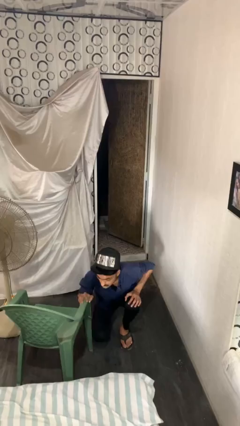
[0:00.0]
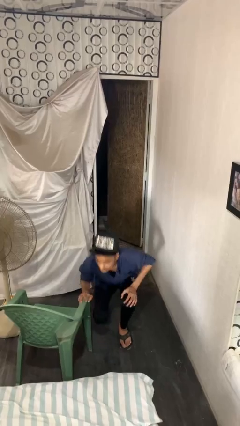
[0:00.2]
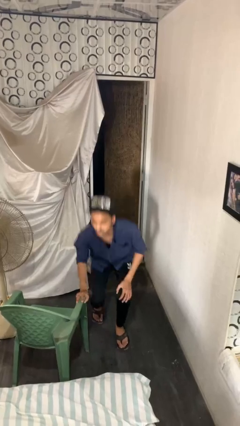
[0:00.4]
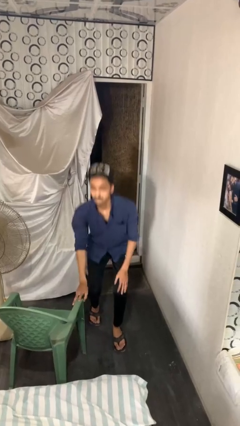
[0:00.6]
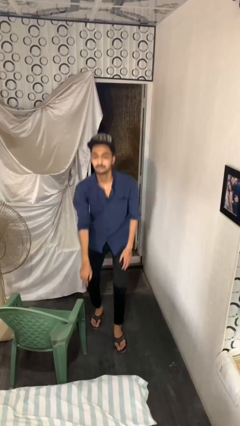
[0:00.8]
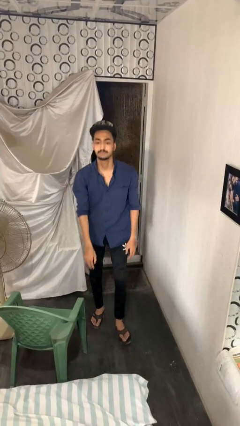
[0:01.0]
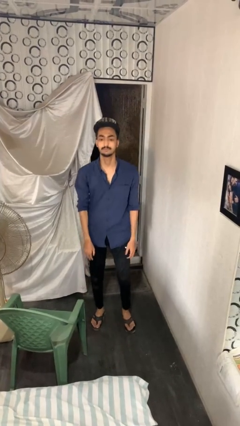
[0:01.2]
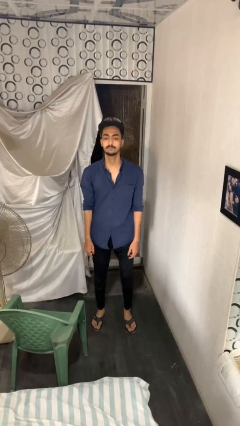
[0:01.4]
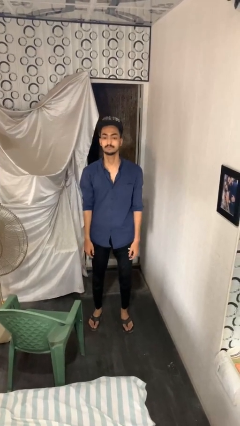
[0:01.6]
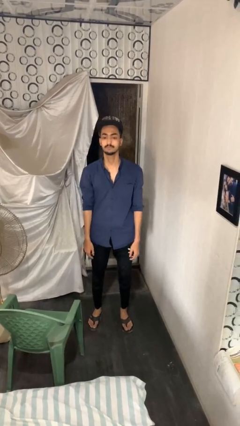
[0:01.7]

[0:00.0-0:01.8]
person stands up from floor

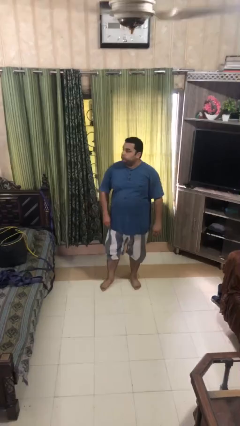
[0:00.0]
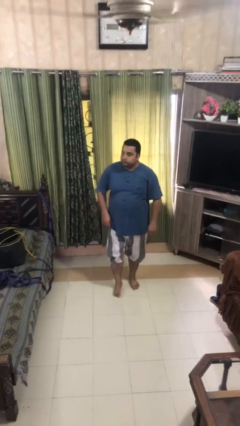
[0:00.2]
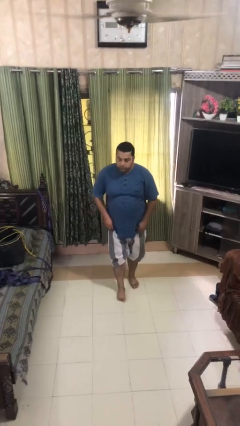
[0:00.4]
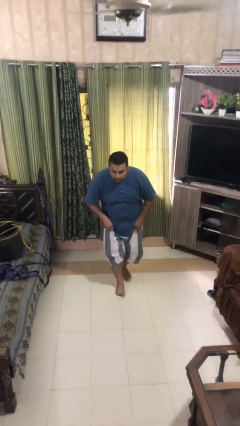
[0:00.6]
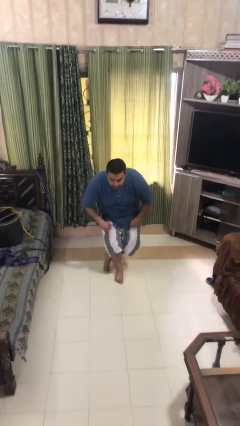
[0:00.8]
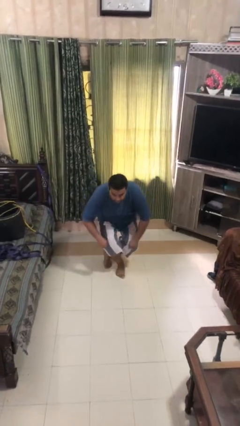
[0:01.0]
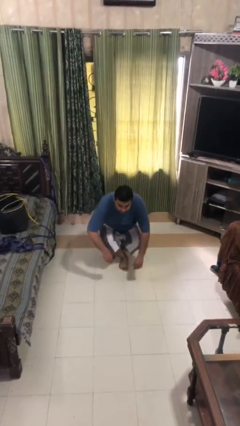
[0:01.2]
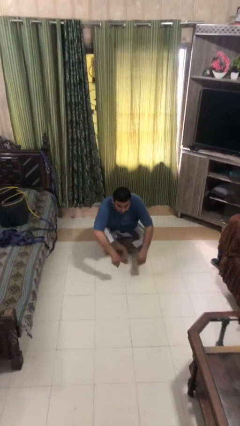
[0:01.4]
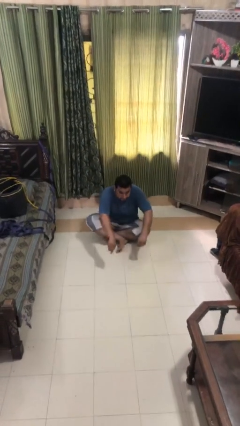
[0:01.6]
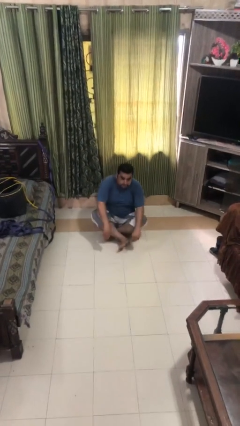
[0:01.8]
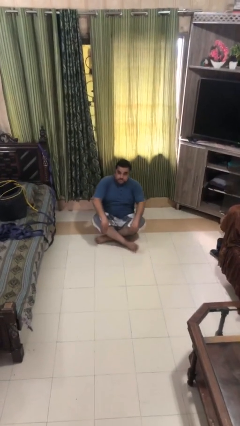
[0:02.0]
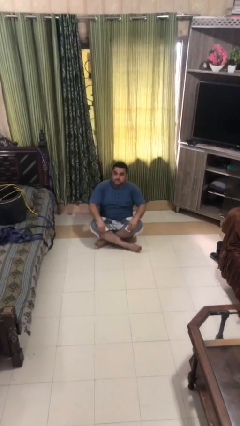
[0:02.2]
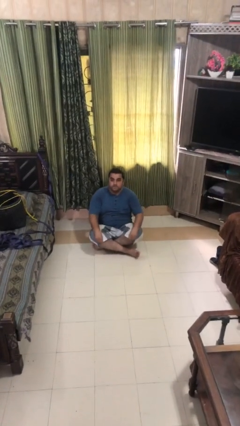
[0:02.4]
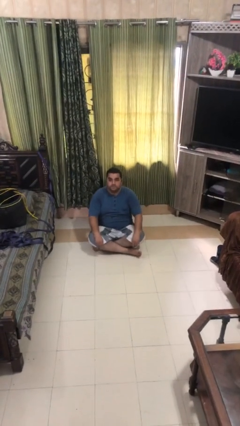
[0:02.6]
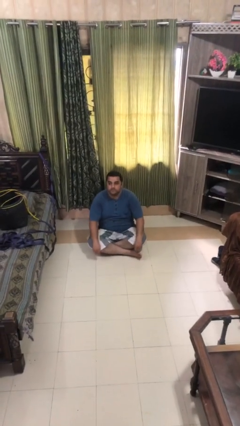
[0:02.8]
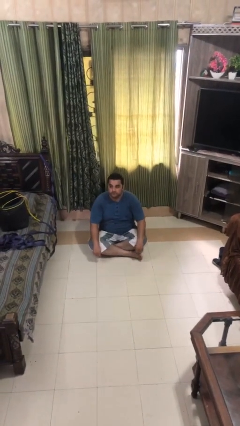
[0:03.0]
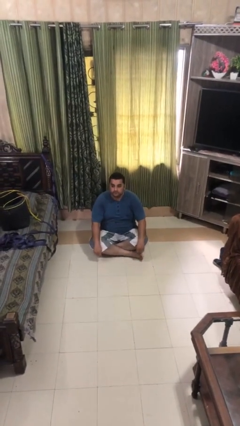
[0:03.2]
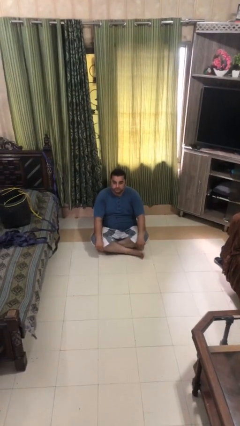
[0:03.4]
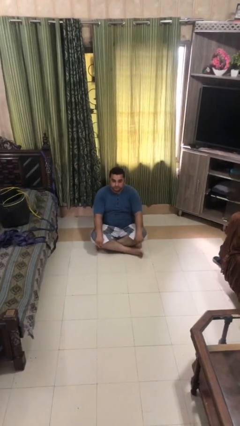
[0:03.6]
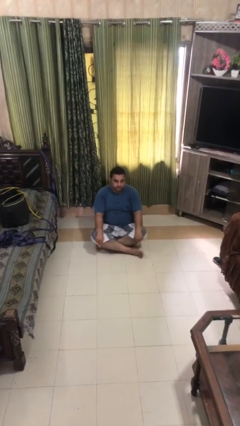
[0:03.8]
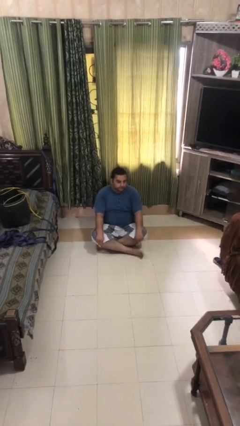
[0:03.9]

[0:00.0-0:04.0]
person sits crisscross

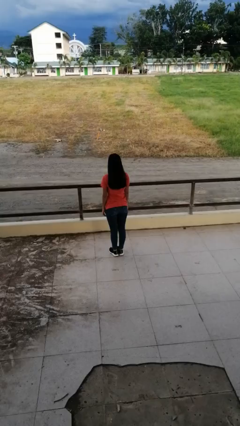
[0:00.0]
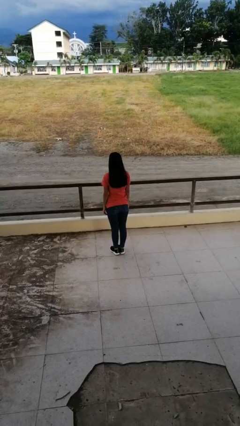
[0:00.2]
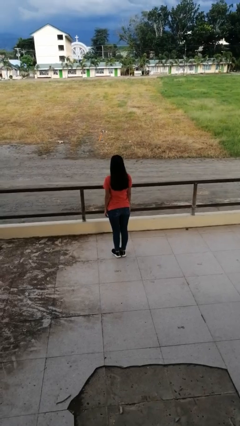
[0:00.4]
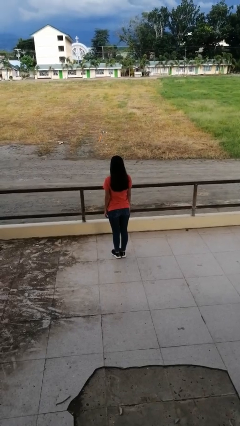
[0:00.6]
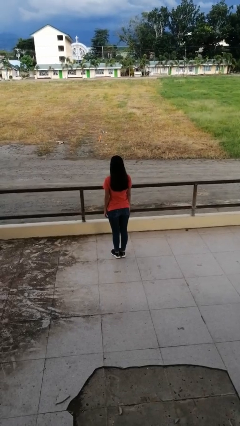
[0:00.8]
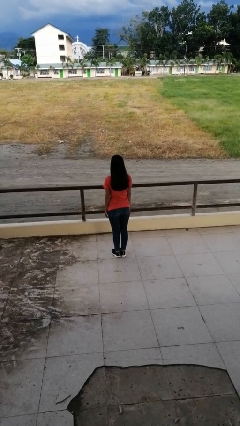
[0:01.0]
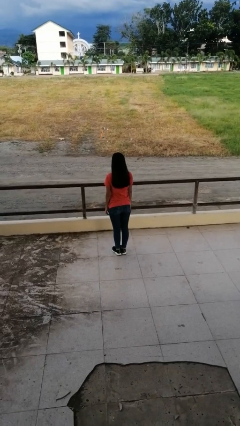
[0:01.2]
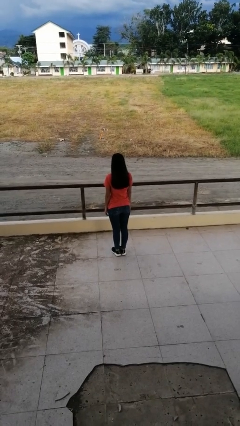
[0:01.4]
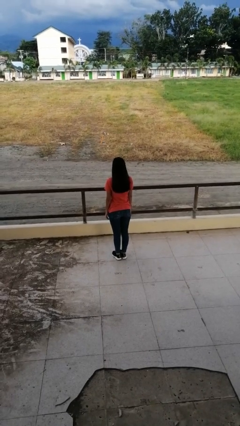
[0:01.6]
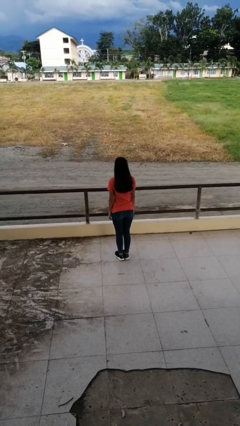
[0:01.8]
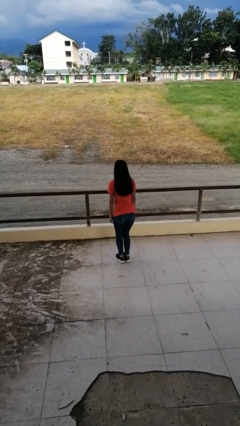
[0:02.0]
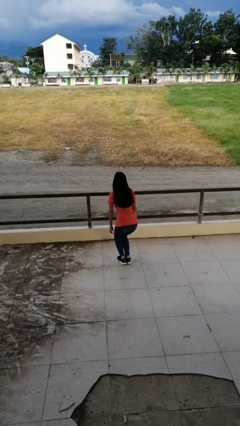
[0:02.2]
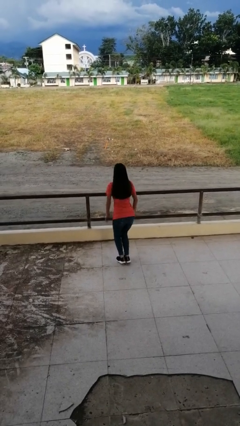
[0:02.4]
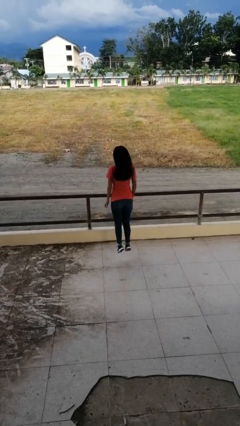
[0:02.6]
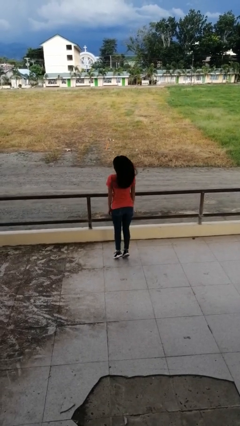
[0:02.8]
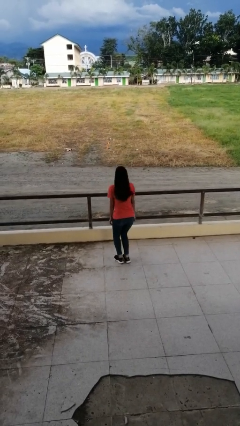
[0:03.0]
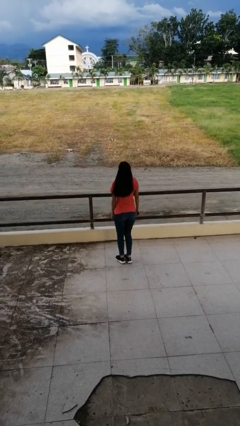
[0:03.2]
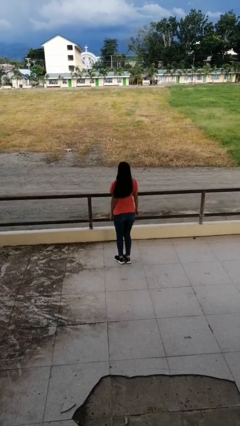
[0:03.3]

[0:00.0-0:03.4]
person jumps

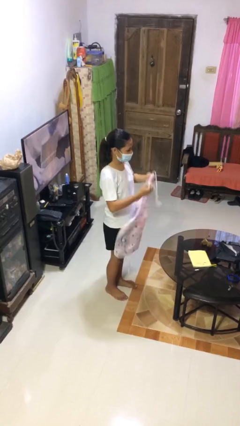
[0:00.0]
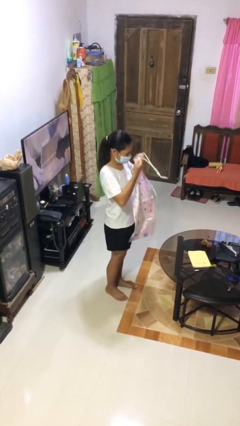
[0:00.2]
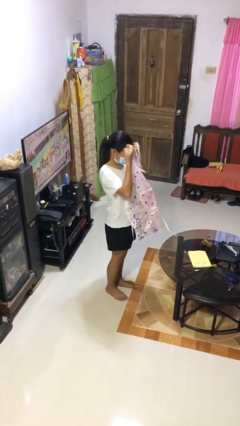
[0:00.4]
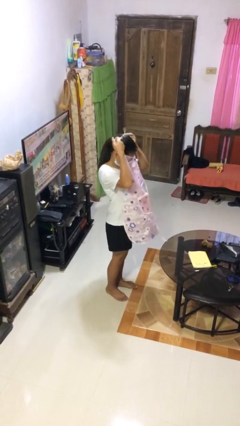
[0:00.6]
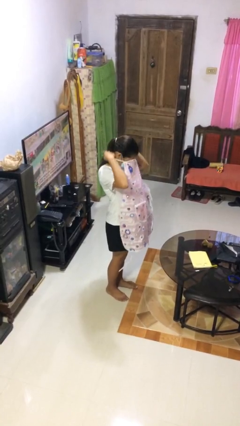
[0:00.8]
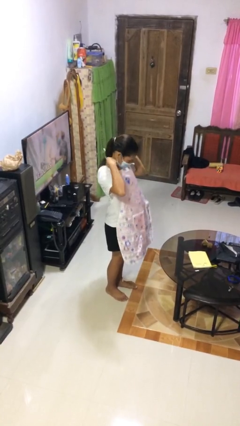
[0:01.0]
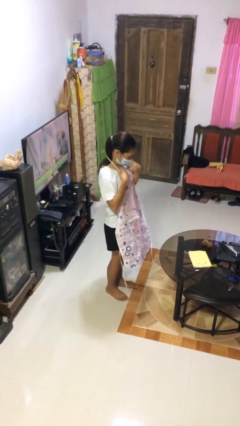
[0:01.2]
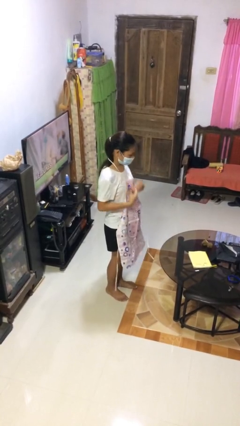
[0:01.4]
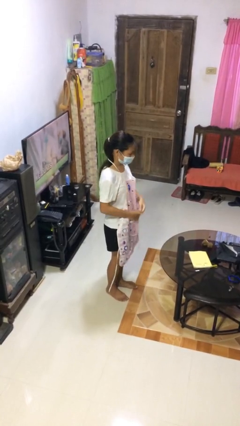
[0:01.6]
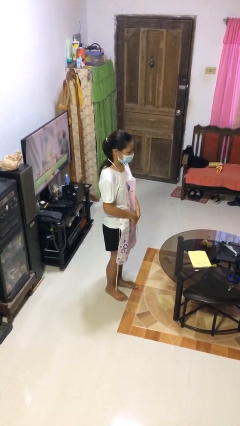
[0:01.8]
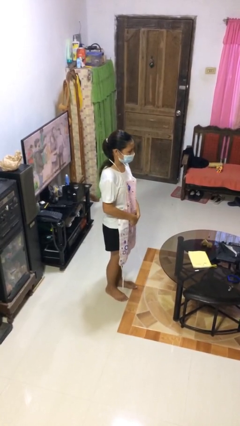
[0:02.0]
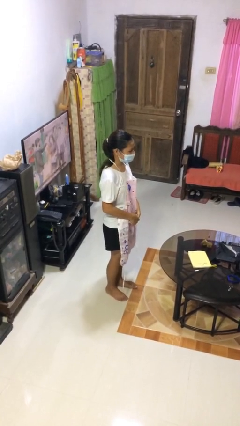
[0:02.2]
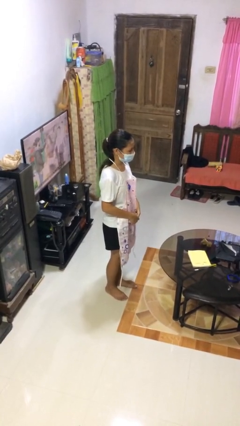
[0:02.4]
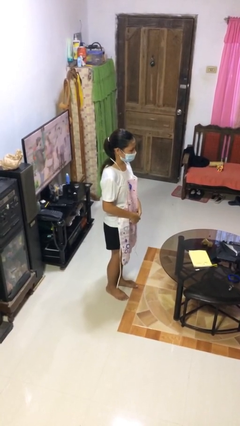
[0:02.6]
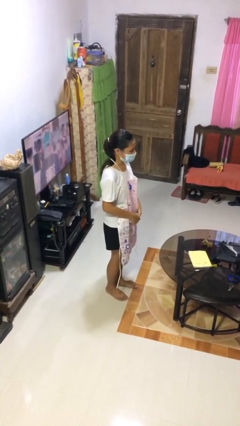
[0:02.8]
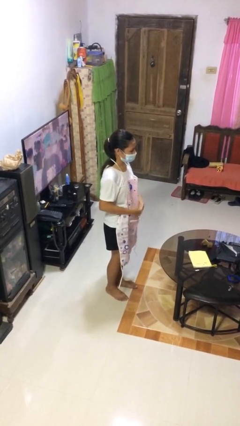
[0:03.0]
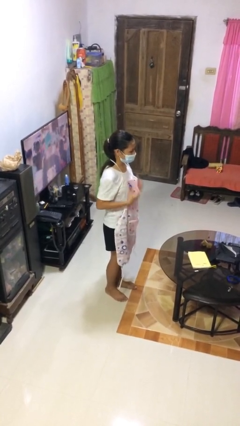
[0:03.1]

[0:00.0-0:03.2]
person puts on apron

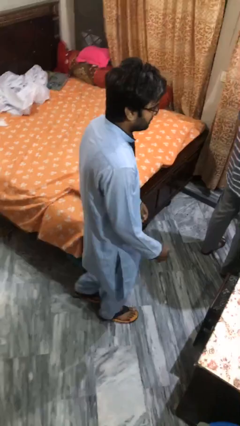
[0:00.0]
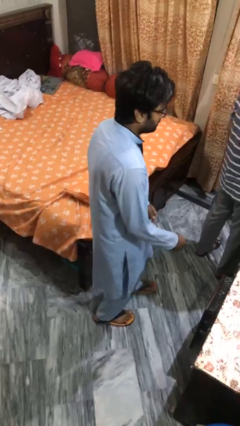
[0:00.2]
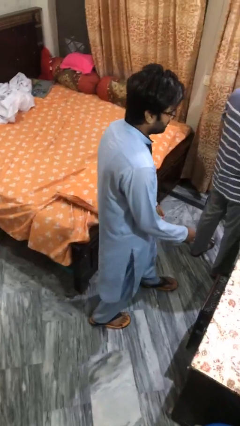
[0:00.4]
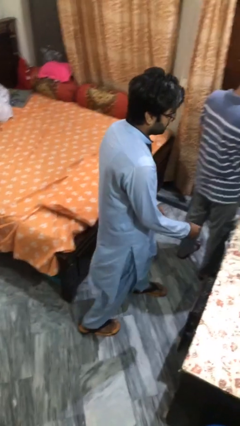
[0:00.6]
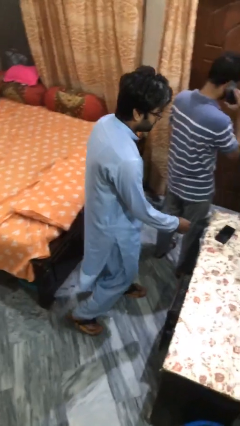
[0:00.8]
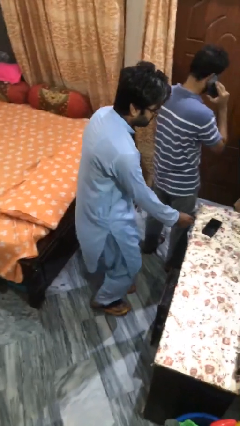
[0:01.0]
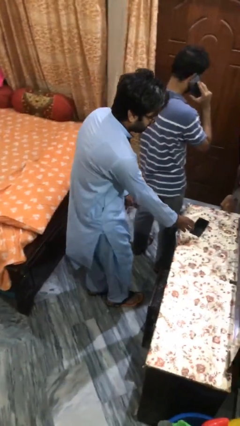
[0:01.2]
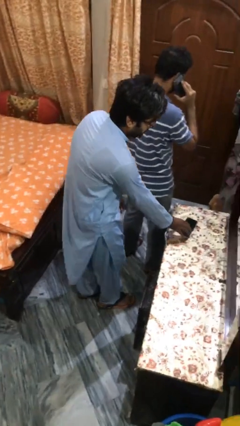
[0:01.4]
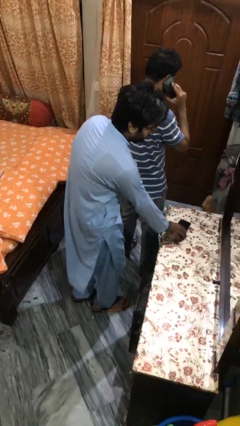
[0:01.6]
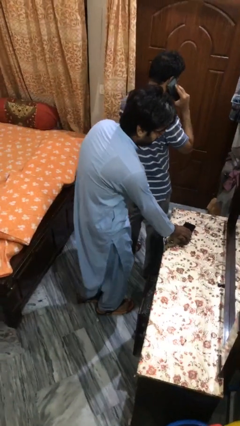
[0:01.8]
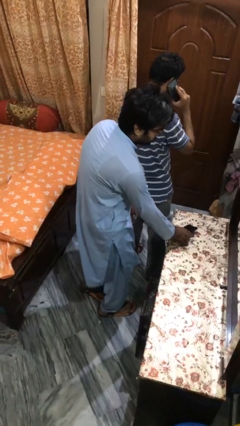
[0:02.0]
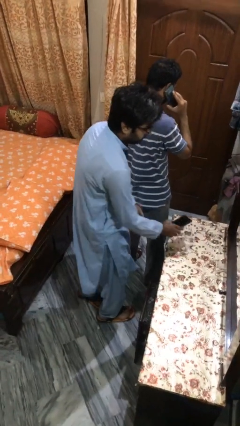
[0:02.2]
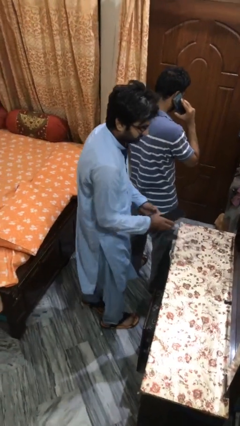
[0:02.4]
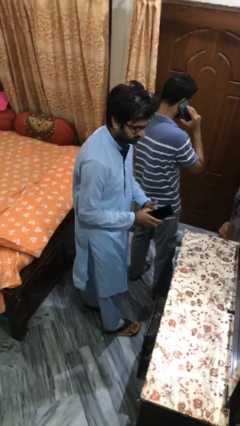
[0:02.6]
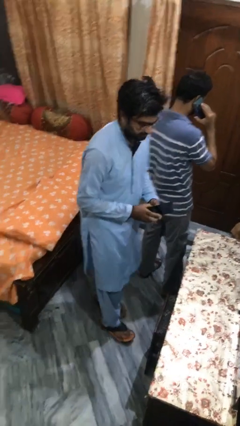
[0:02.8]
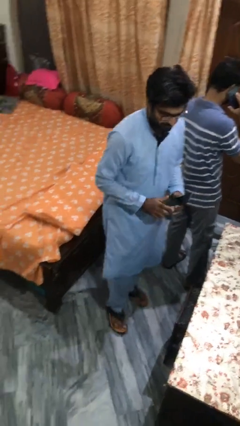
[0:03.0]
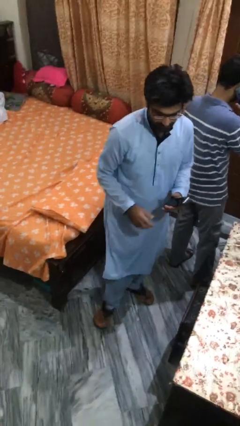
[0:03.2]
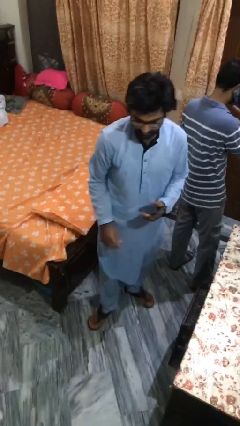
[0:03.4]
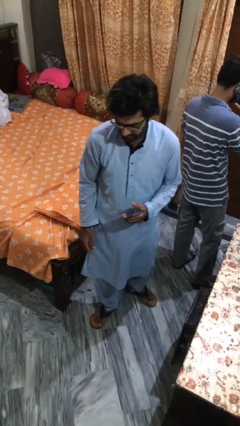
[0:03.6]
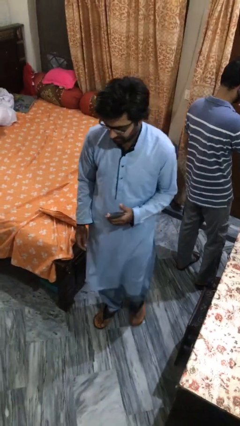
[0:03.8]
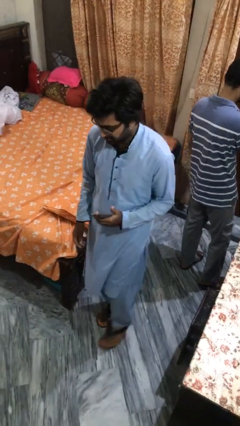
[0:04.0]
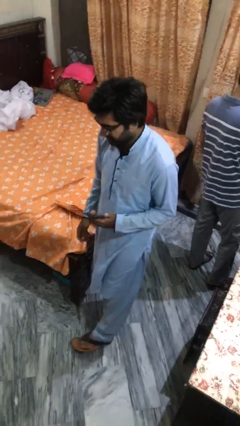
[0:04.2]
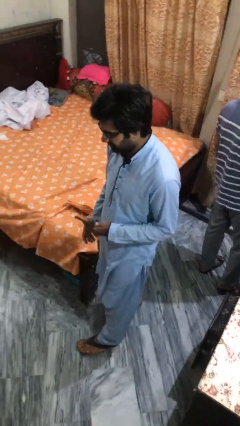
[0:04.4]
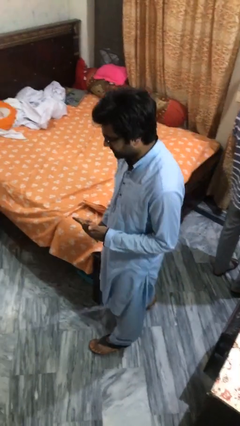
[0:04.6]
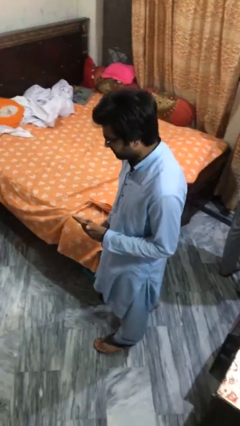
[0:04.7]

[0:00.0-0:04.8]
person steals object from person

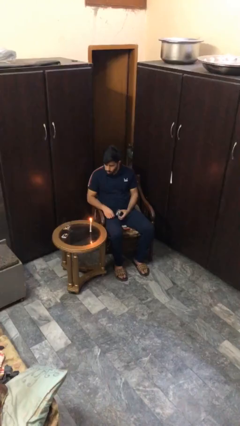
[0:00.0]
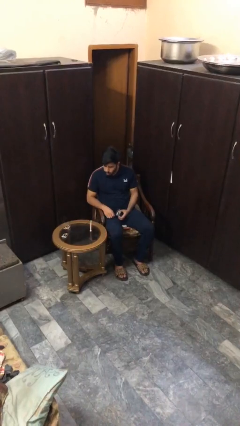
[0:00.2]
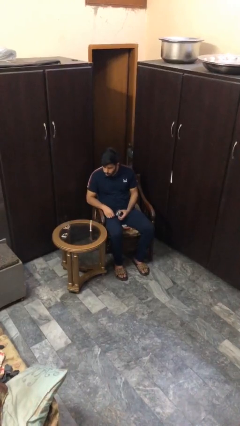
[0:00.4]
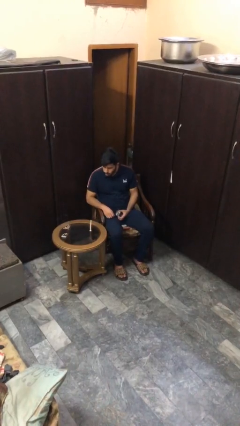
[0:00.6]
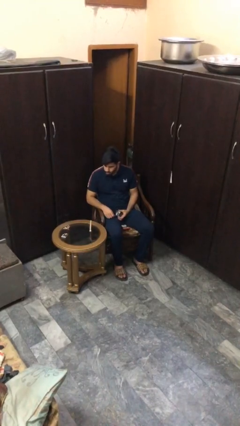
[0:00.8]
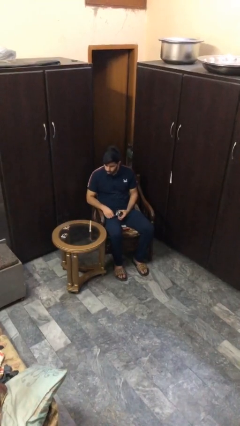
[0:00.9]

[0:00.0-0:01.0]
person extinguishes candle
